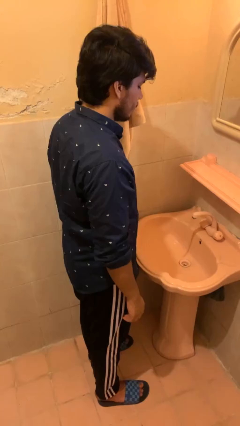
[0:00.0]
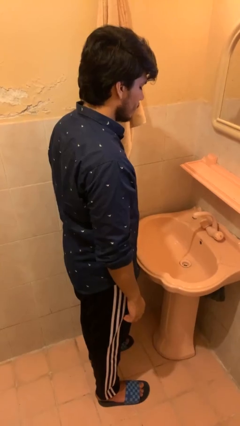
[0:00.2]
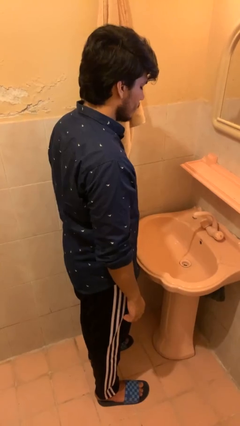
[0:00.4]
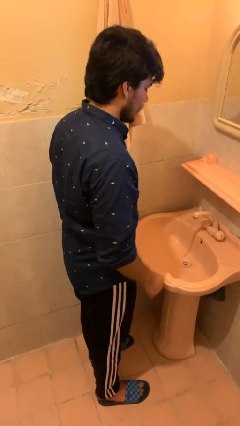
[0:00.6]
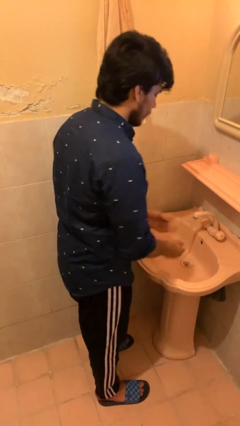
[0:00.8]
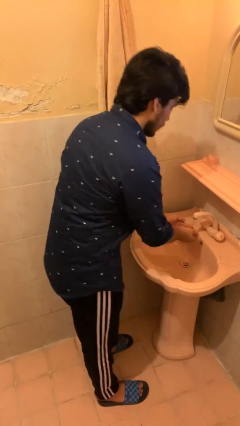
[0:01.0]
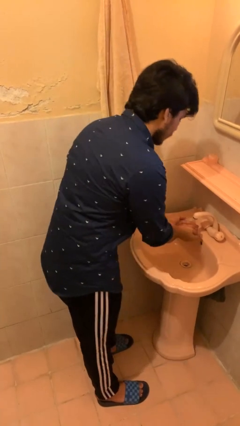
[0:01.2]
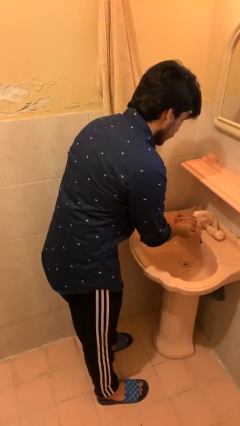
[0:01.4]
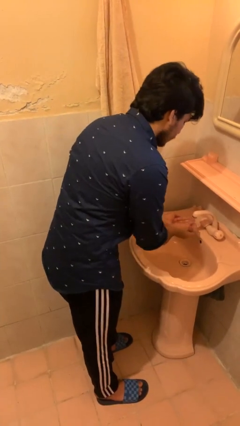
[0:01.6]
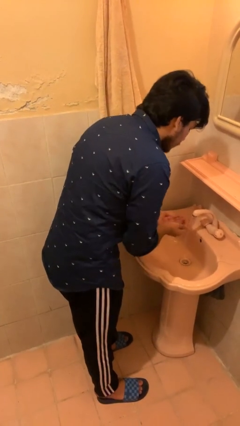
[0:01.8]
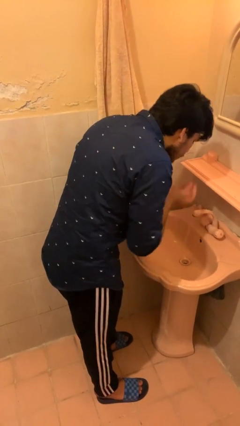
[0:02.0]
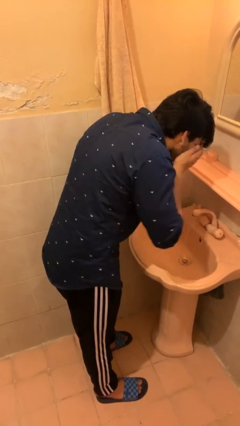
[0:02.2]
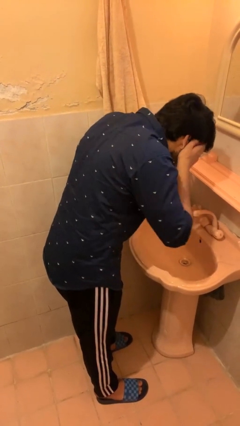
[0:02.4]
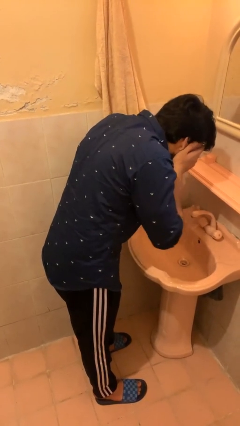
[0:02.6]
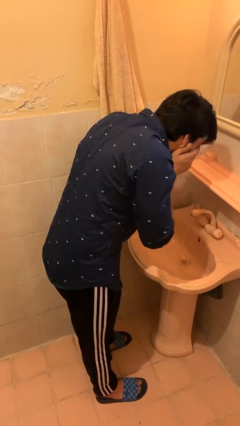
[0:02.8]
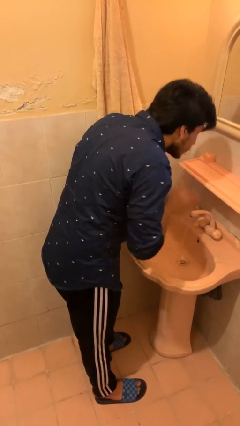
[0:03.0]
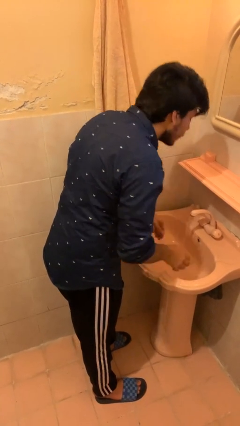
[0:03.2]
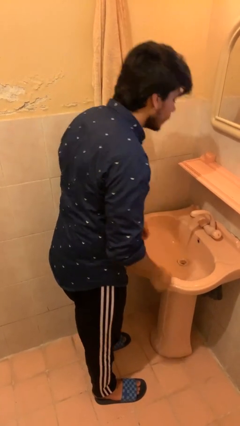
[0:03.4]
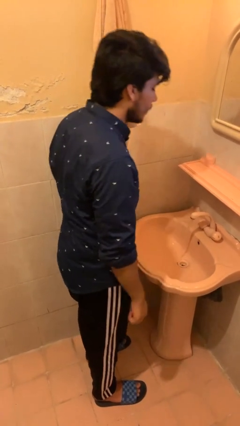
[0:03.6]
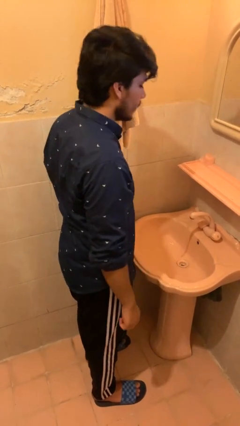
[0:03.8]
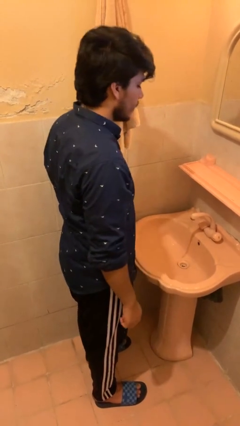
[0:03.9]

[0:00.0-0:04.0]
person washes face

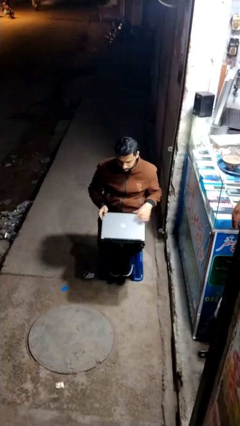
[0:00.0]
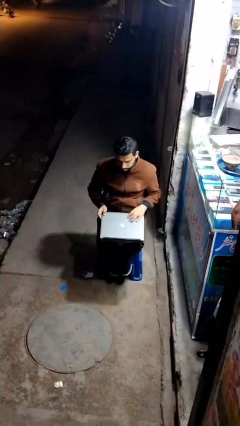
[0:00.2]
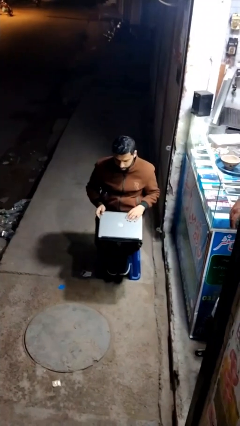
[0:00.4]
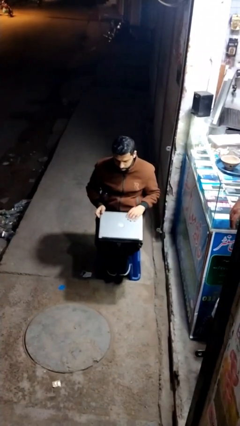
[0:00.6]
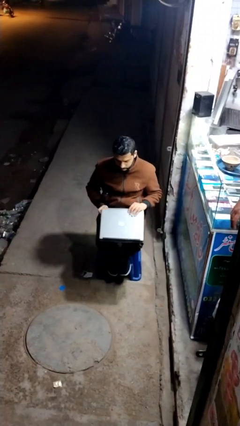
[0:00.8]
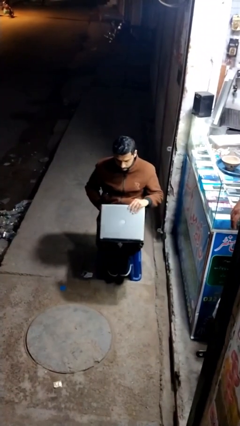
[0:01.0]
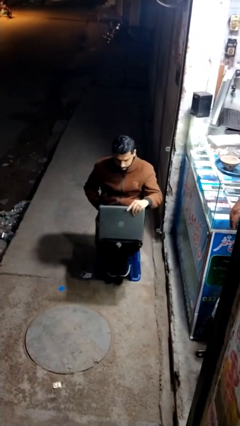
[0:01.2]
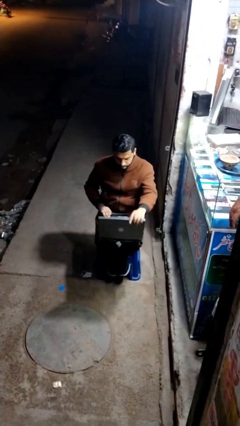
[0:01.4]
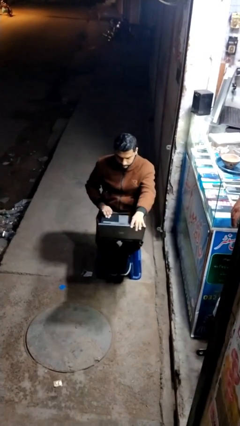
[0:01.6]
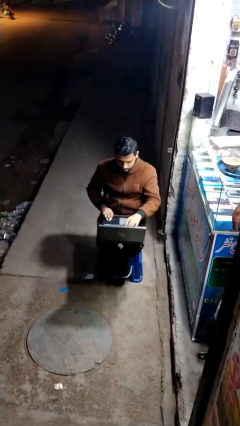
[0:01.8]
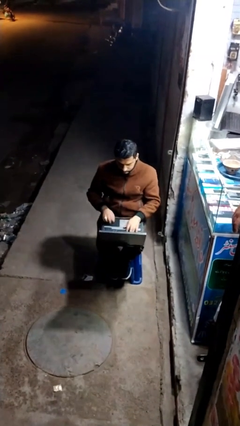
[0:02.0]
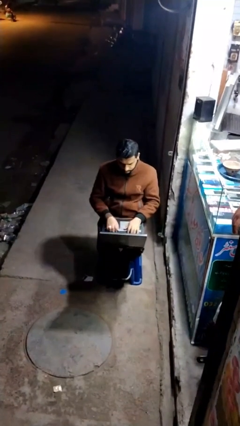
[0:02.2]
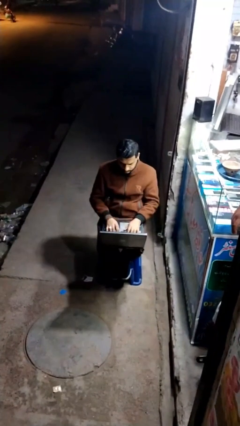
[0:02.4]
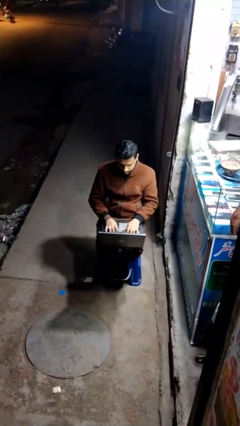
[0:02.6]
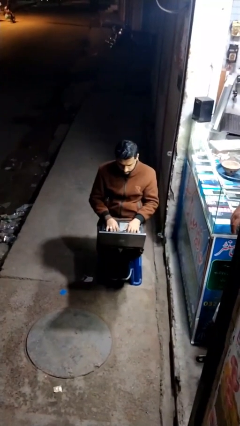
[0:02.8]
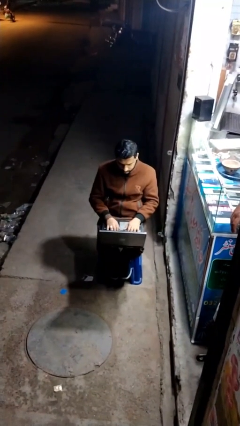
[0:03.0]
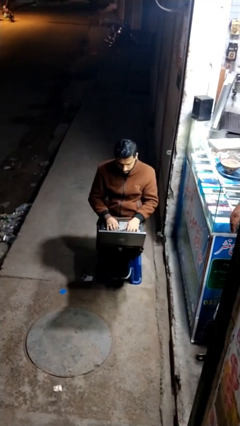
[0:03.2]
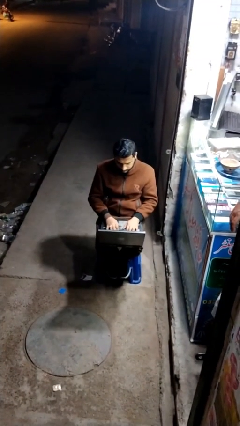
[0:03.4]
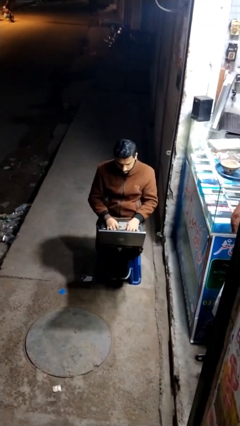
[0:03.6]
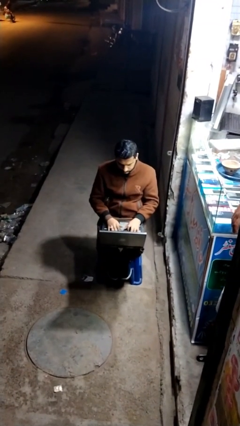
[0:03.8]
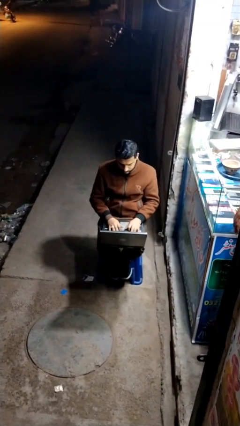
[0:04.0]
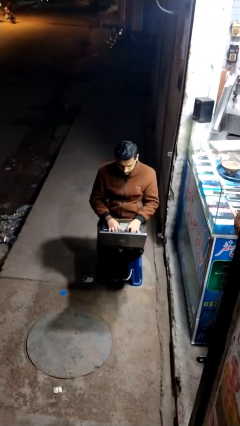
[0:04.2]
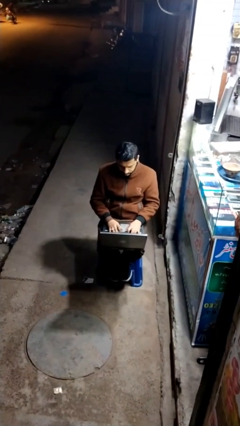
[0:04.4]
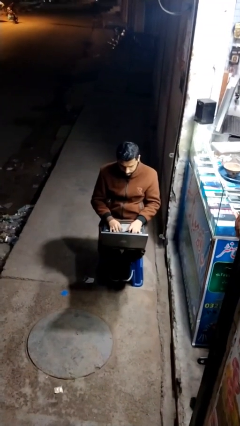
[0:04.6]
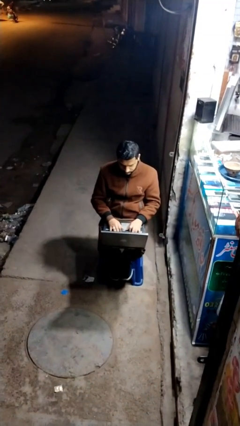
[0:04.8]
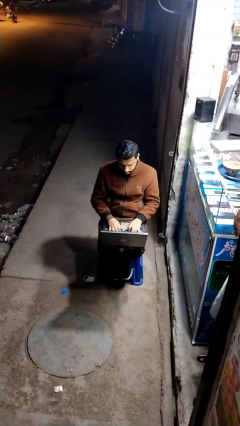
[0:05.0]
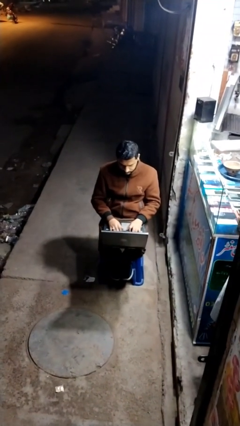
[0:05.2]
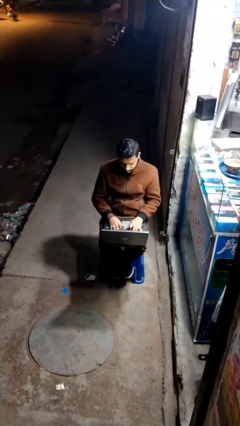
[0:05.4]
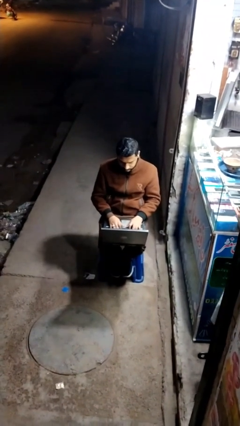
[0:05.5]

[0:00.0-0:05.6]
person interacts with laptop

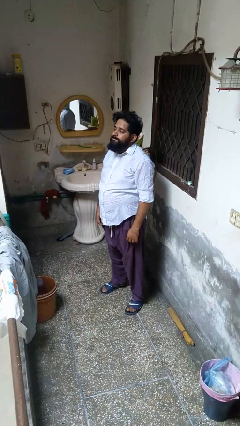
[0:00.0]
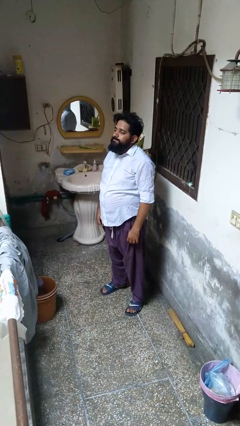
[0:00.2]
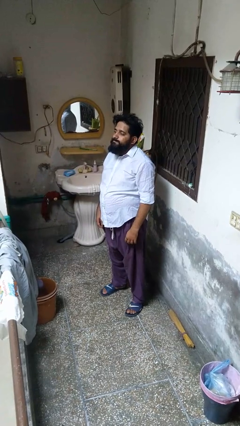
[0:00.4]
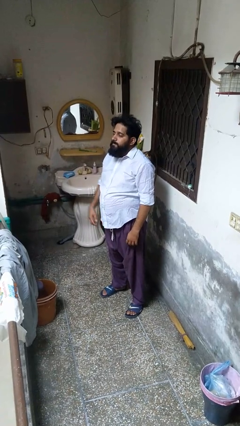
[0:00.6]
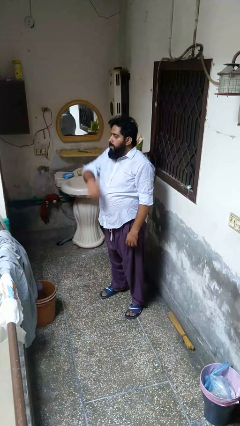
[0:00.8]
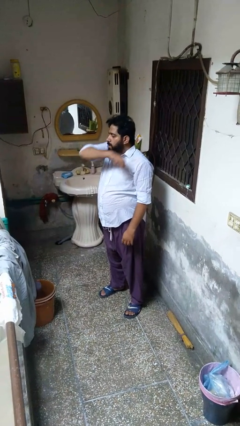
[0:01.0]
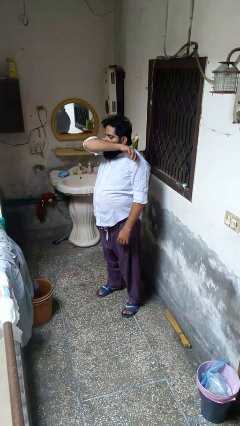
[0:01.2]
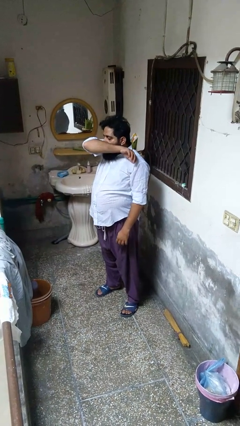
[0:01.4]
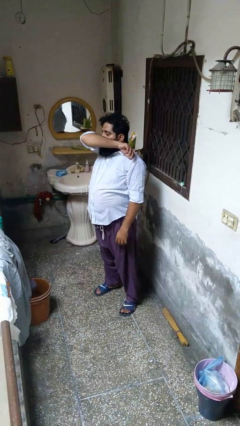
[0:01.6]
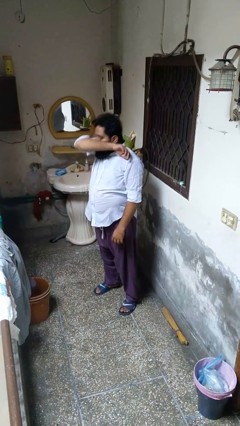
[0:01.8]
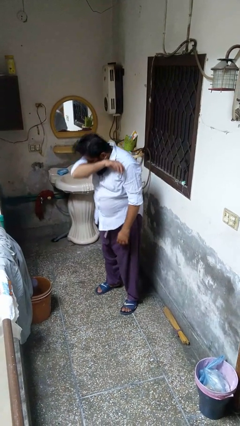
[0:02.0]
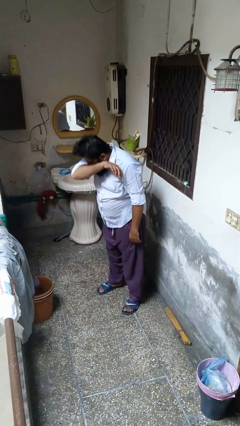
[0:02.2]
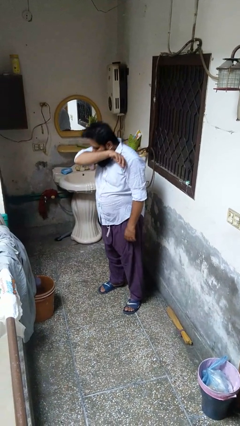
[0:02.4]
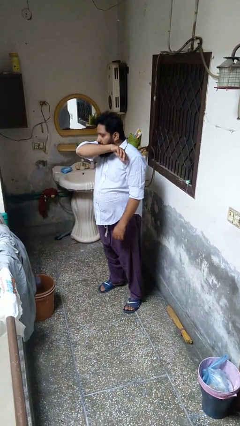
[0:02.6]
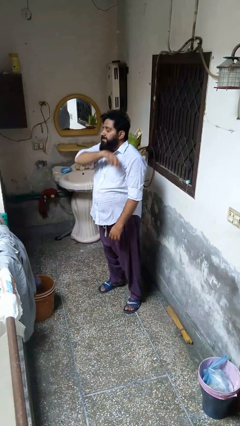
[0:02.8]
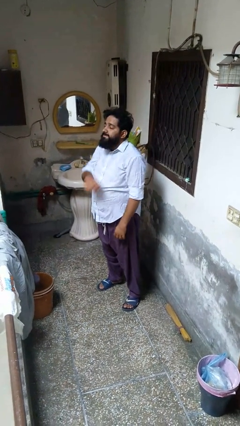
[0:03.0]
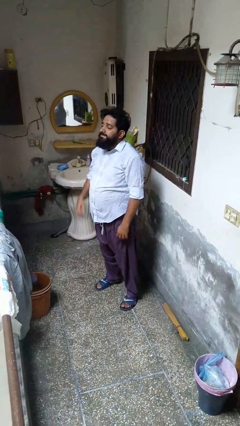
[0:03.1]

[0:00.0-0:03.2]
person sneezes into arm

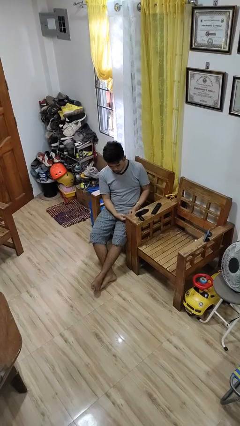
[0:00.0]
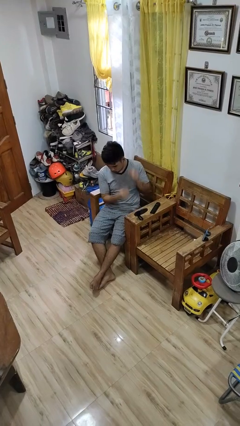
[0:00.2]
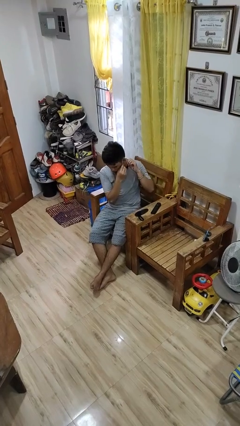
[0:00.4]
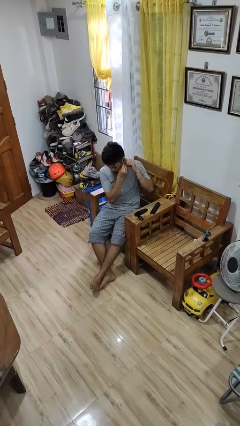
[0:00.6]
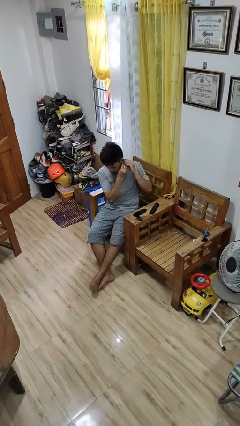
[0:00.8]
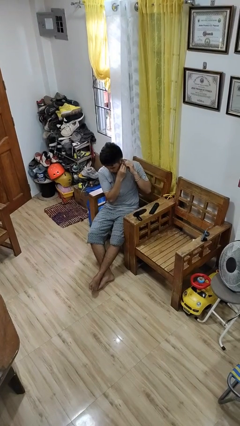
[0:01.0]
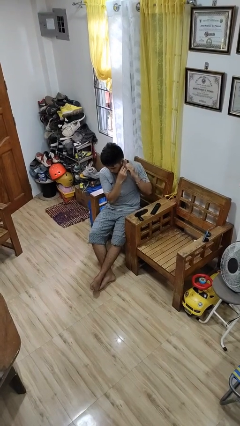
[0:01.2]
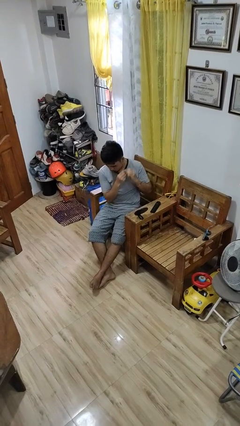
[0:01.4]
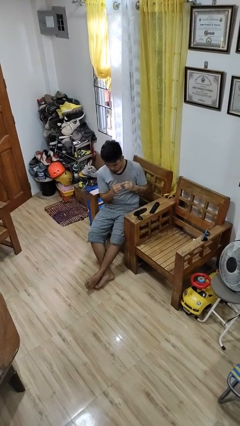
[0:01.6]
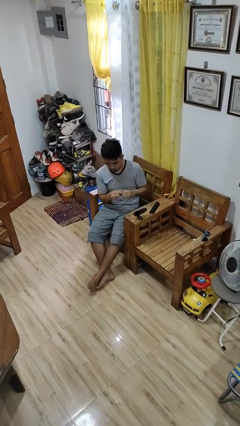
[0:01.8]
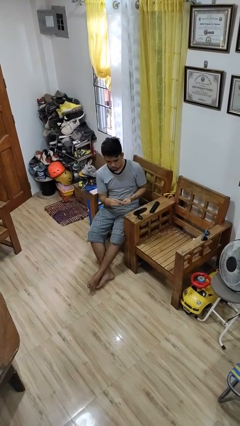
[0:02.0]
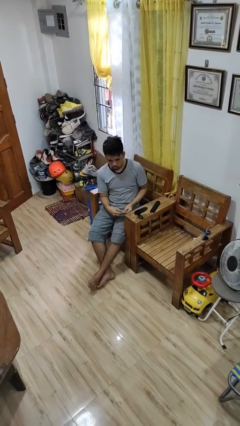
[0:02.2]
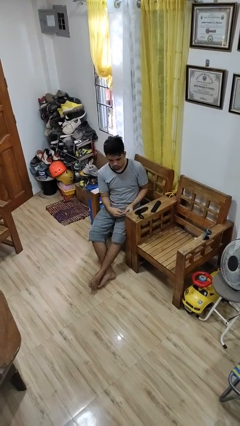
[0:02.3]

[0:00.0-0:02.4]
person takes off earrings

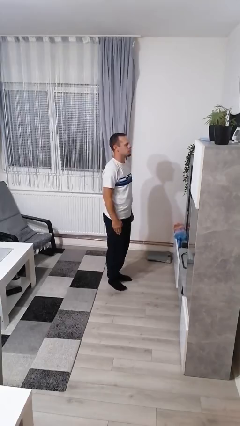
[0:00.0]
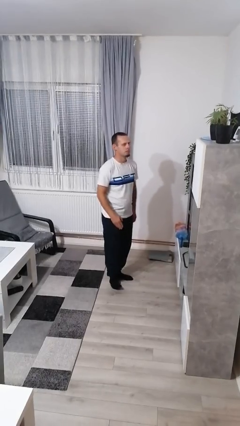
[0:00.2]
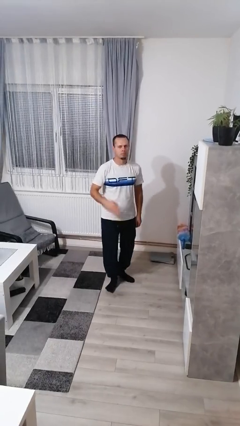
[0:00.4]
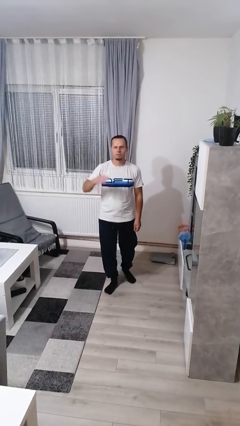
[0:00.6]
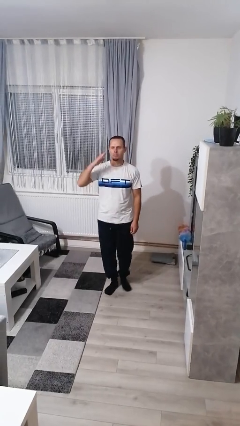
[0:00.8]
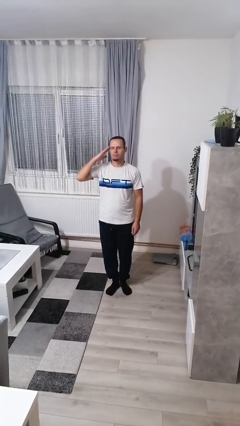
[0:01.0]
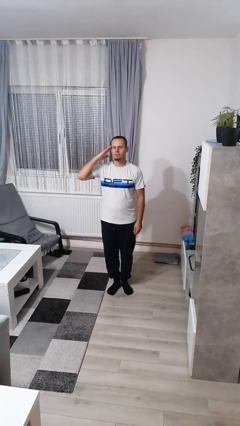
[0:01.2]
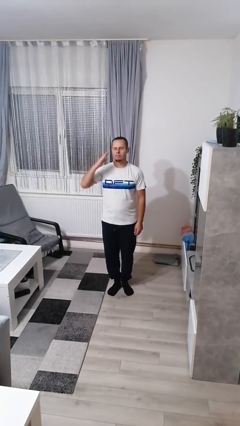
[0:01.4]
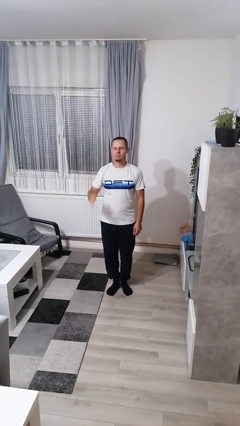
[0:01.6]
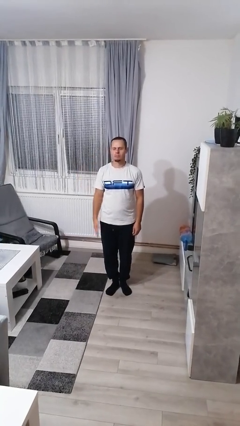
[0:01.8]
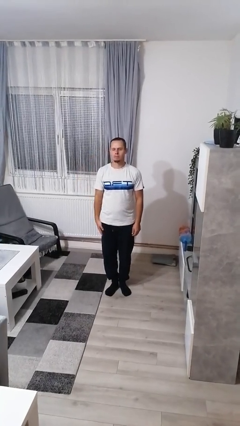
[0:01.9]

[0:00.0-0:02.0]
person salutes

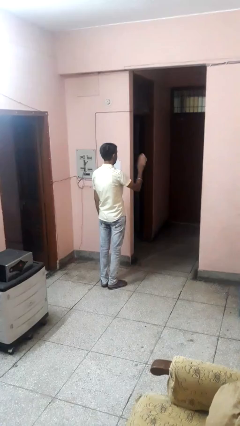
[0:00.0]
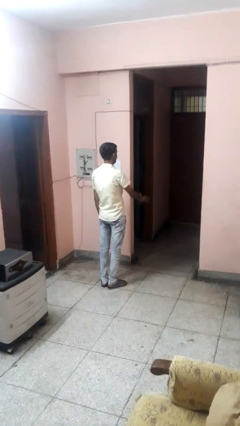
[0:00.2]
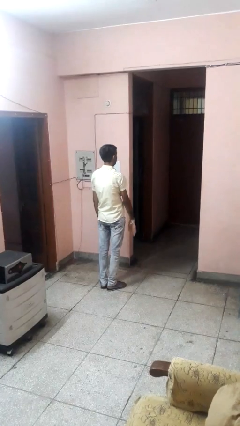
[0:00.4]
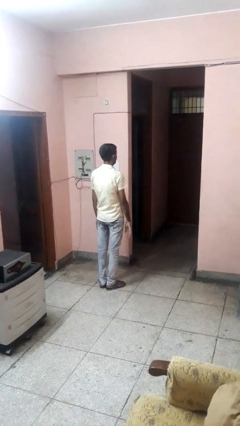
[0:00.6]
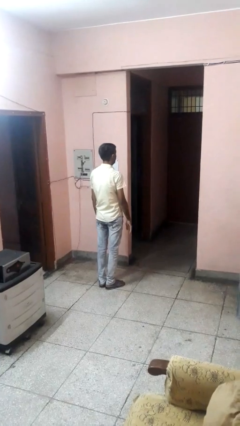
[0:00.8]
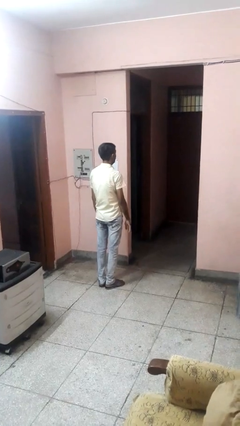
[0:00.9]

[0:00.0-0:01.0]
person gestures swipe down
